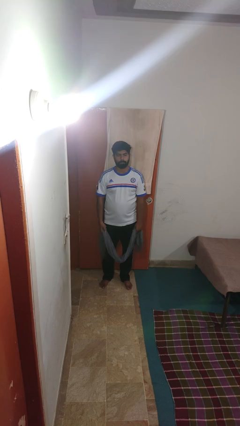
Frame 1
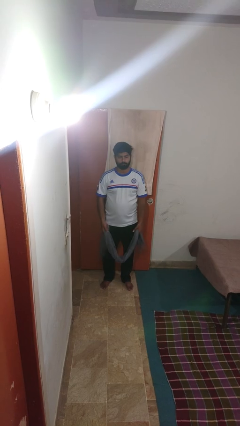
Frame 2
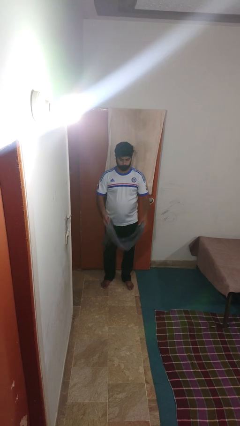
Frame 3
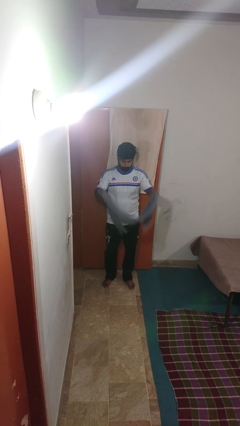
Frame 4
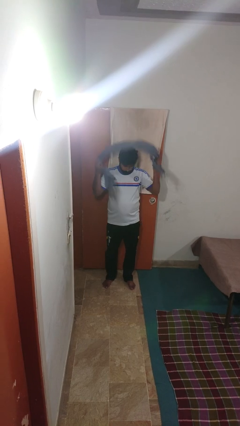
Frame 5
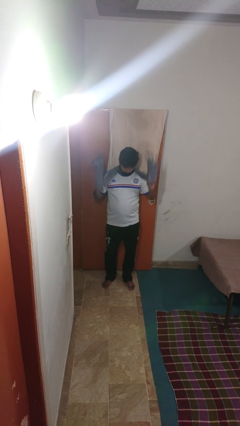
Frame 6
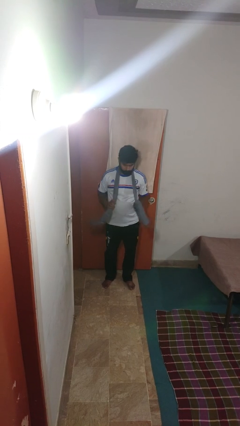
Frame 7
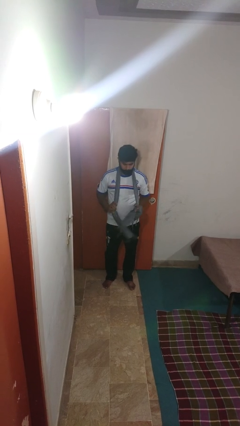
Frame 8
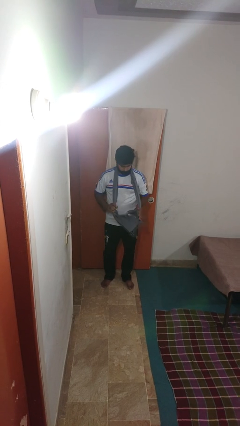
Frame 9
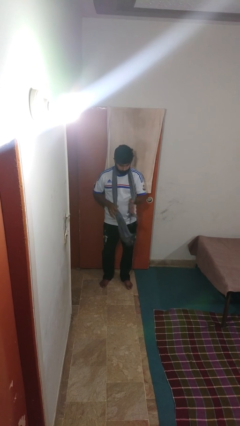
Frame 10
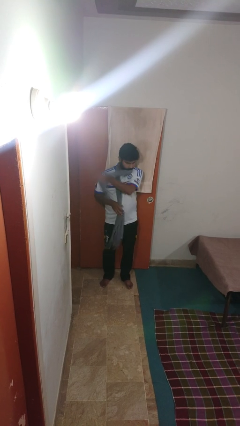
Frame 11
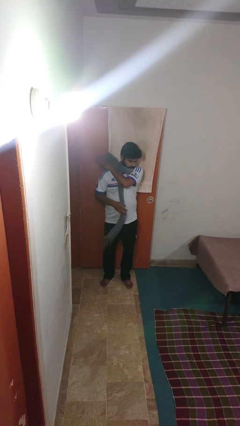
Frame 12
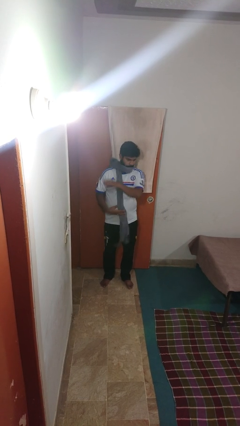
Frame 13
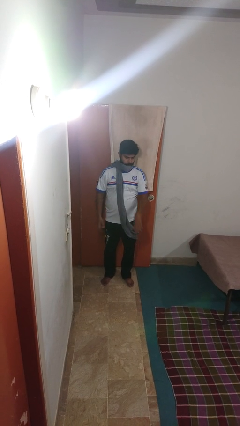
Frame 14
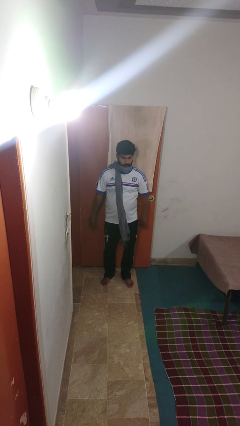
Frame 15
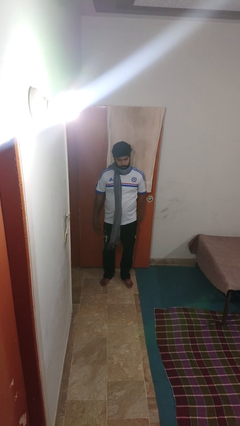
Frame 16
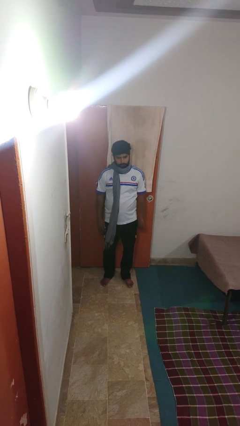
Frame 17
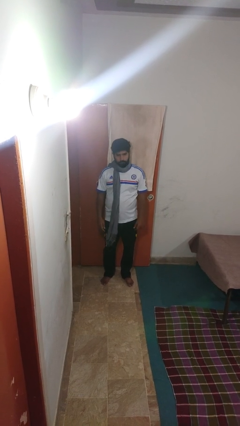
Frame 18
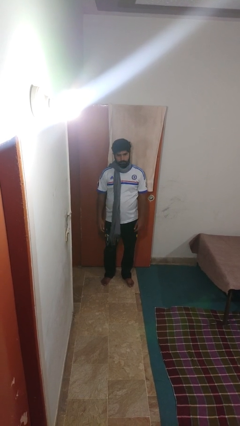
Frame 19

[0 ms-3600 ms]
person puts on scarf

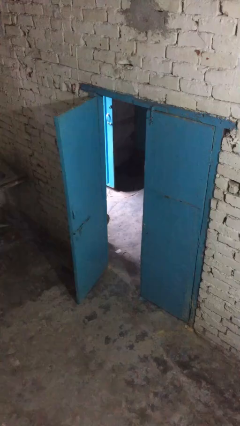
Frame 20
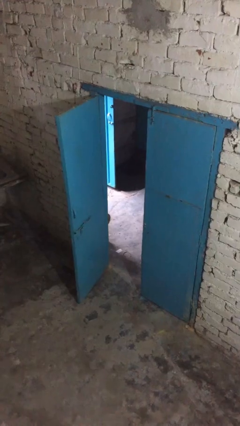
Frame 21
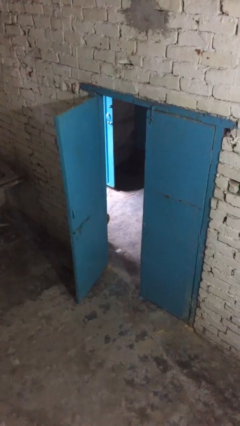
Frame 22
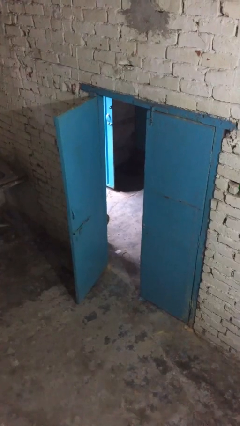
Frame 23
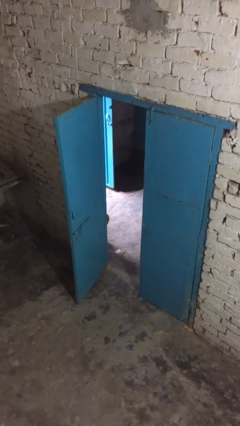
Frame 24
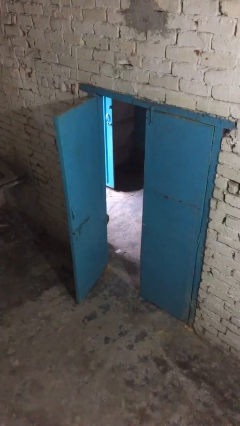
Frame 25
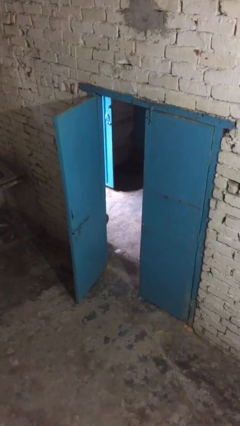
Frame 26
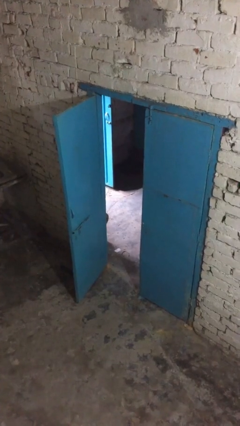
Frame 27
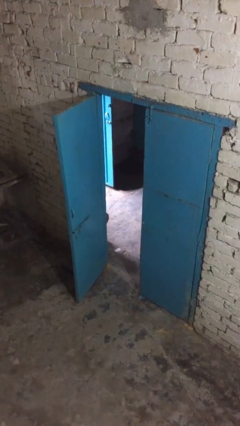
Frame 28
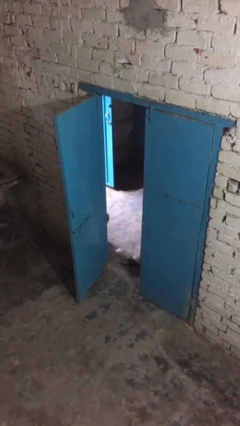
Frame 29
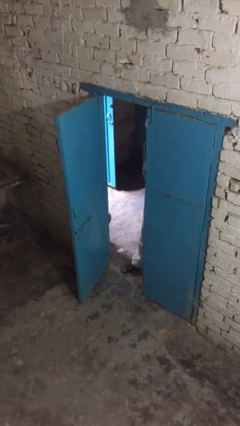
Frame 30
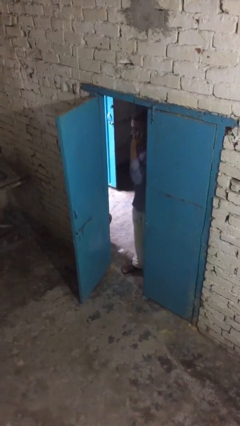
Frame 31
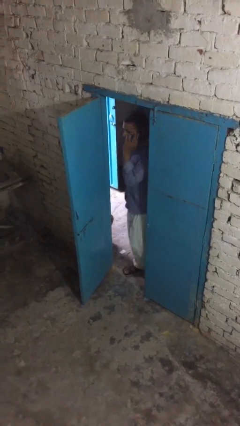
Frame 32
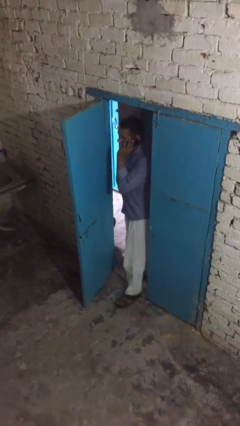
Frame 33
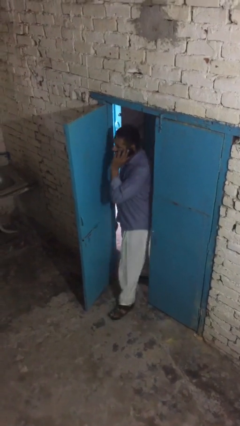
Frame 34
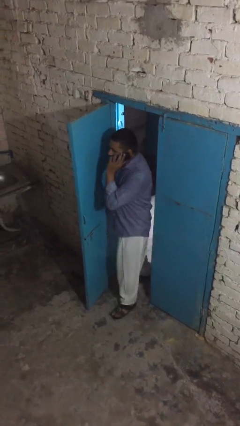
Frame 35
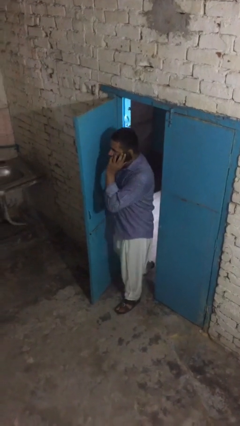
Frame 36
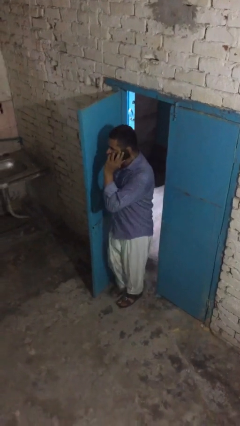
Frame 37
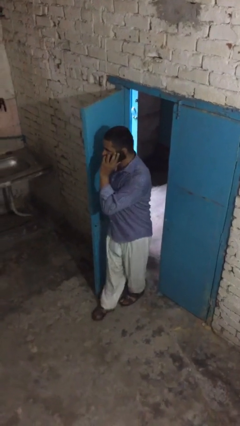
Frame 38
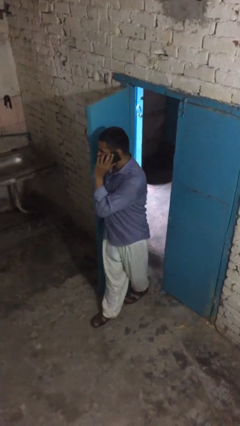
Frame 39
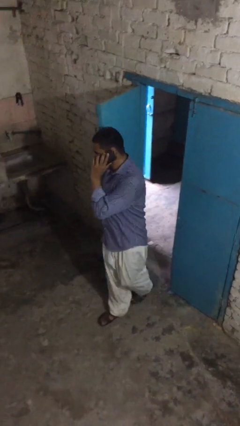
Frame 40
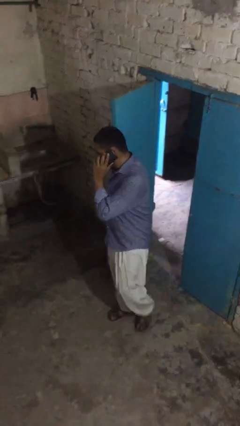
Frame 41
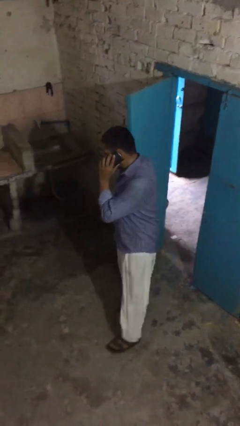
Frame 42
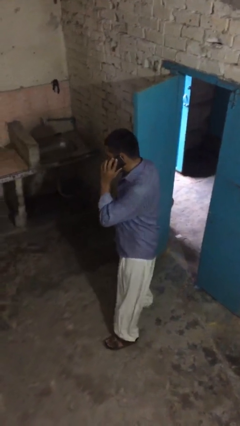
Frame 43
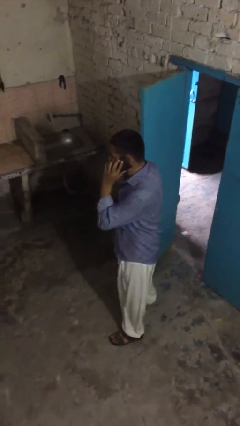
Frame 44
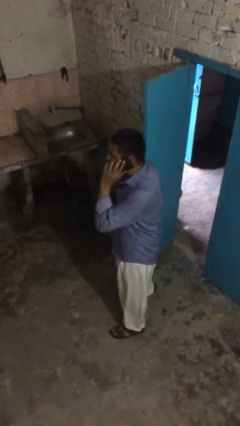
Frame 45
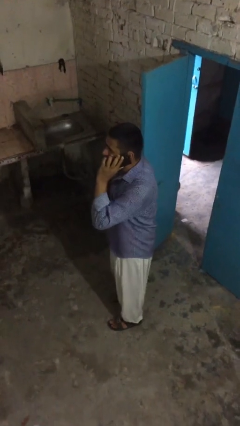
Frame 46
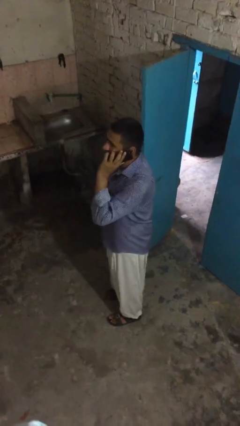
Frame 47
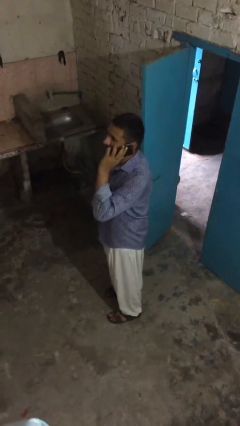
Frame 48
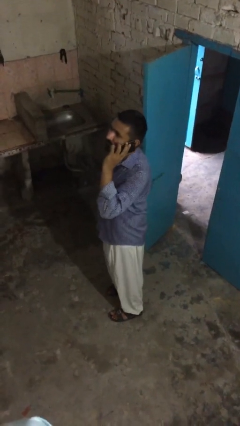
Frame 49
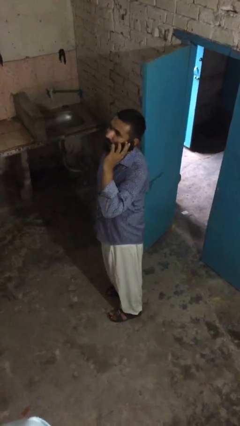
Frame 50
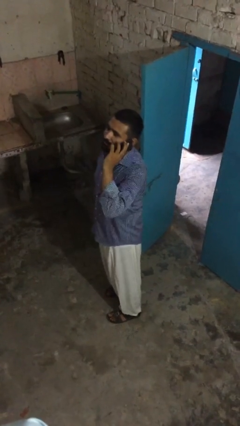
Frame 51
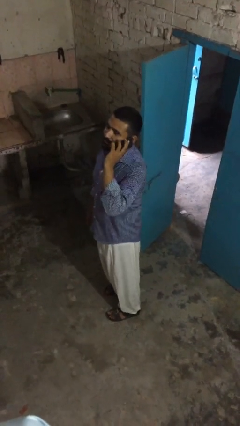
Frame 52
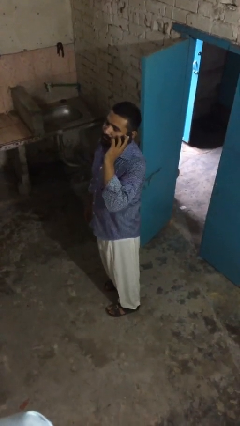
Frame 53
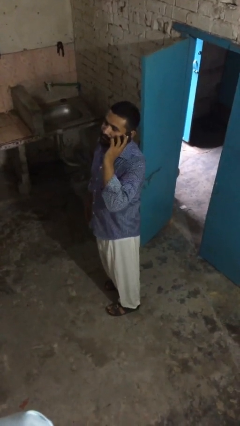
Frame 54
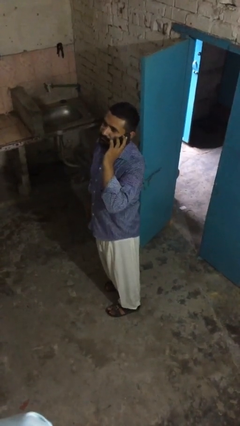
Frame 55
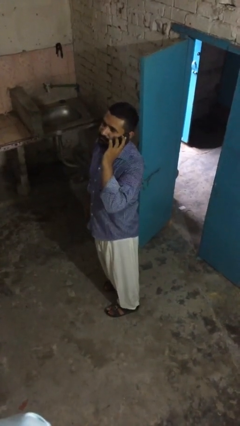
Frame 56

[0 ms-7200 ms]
person enters scene through structure

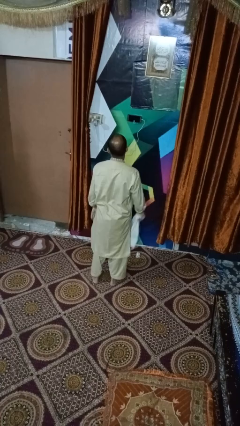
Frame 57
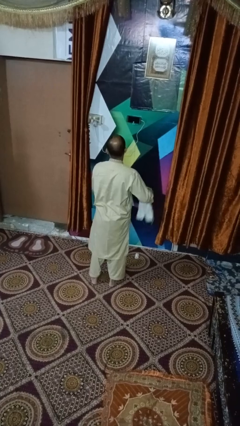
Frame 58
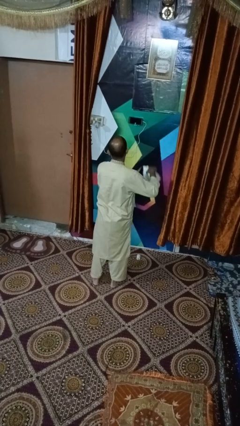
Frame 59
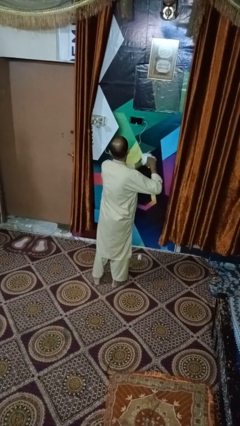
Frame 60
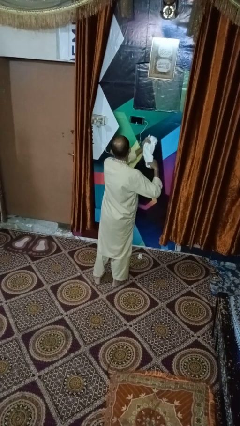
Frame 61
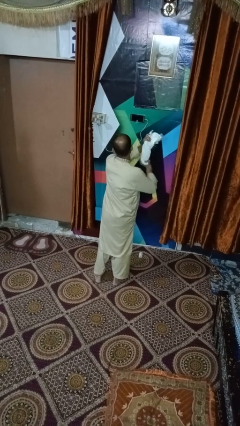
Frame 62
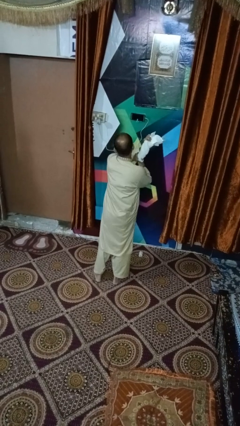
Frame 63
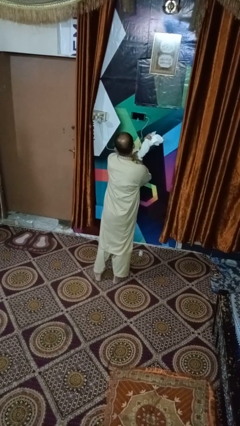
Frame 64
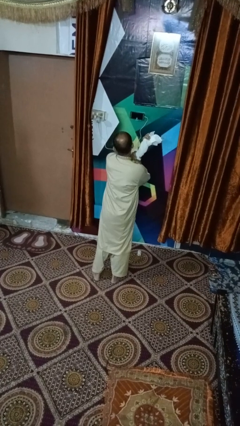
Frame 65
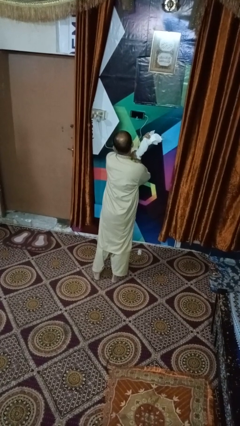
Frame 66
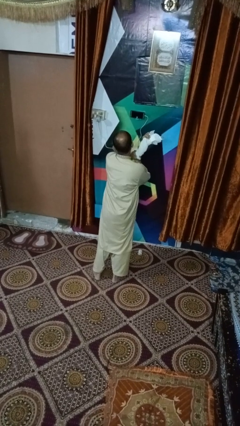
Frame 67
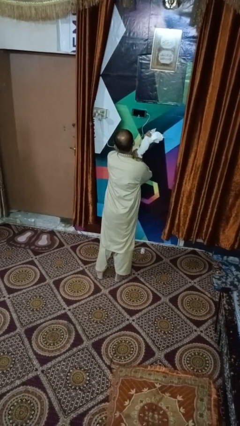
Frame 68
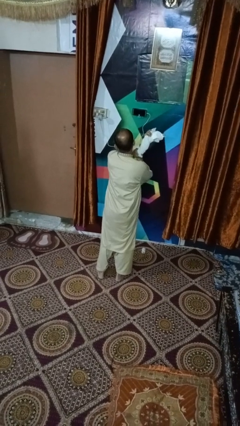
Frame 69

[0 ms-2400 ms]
person squeezes object

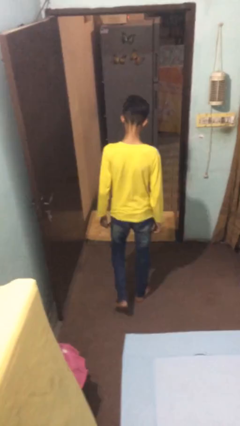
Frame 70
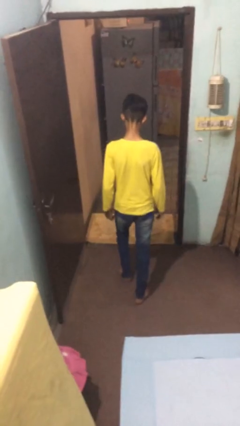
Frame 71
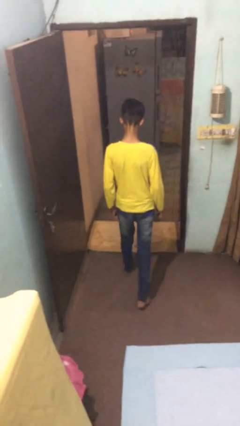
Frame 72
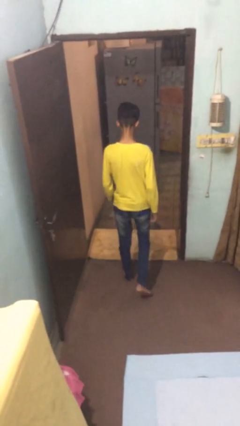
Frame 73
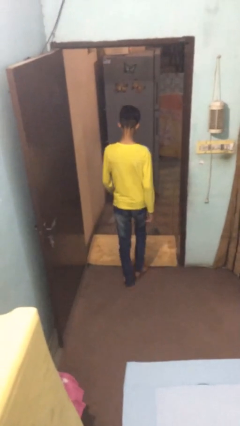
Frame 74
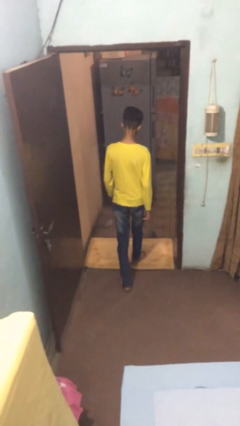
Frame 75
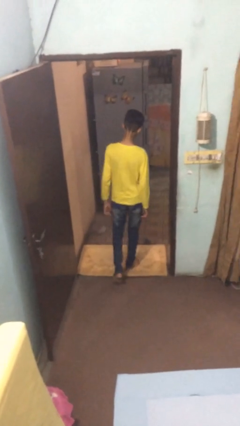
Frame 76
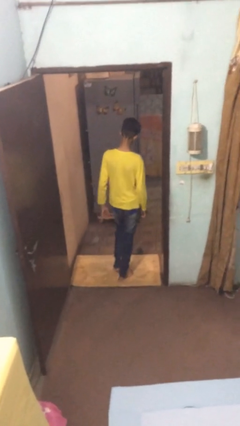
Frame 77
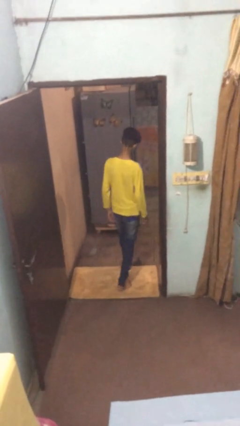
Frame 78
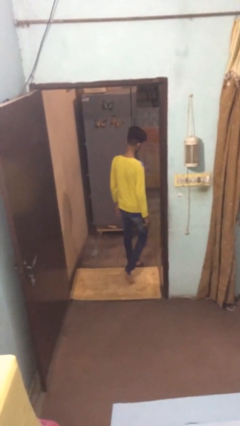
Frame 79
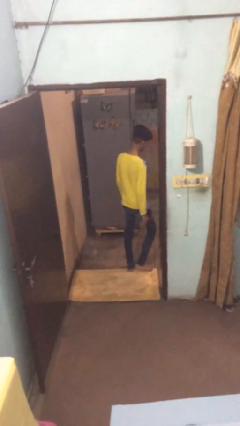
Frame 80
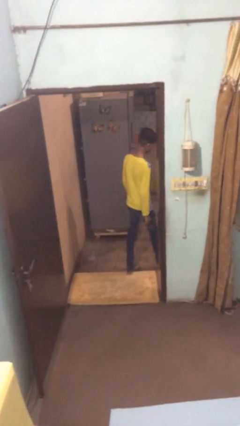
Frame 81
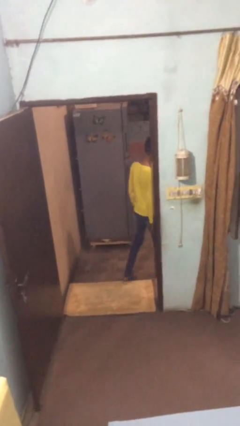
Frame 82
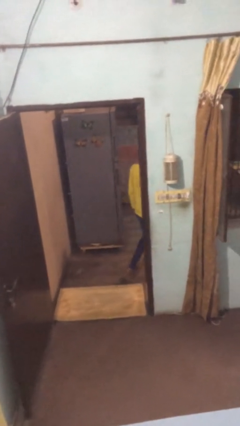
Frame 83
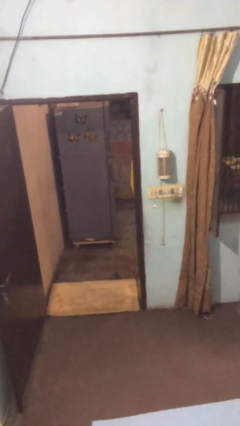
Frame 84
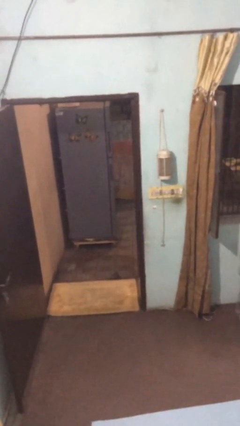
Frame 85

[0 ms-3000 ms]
person exits scene through structure

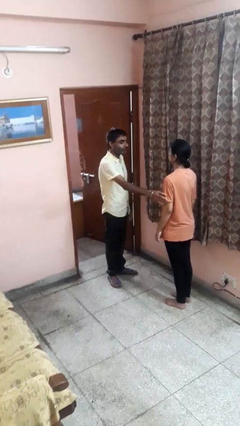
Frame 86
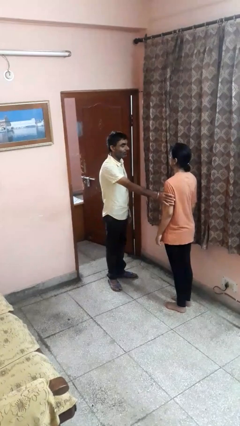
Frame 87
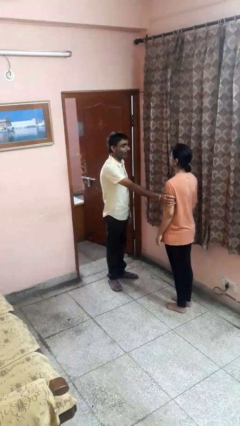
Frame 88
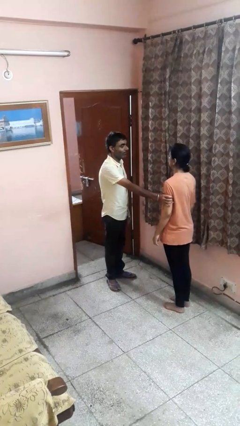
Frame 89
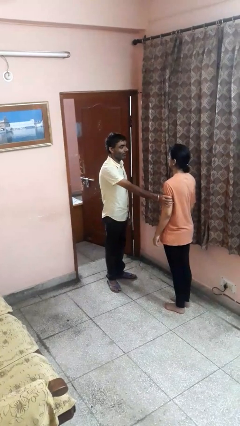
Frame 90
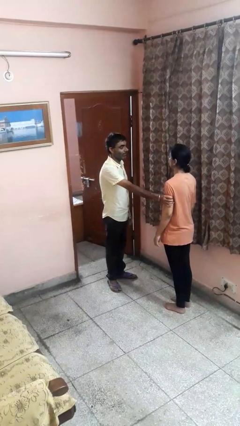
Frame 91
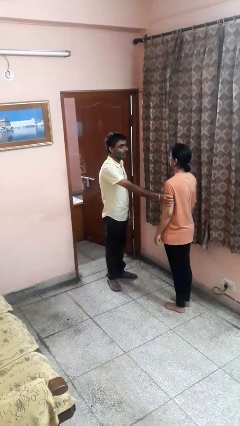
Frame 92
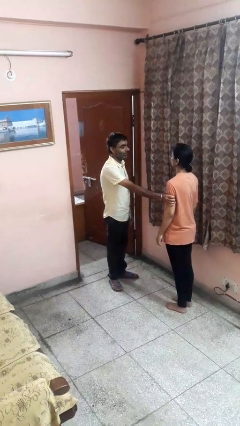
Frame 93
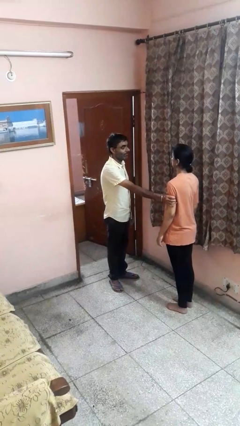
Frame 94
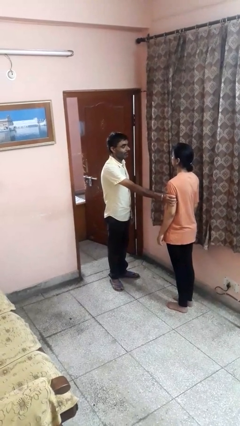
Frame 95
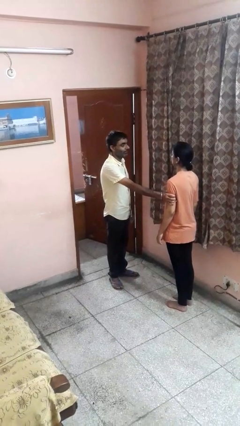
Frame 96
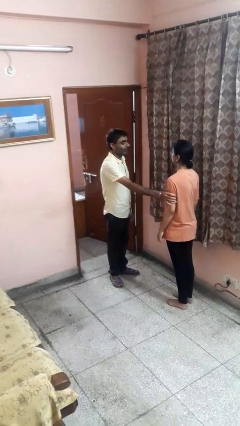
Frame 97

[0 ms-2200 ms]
person grabs person by bicep
